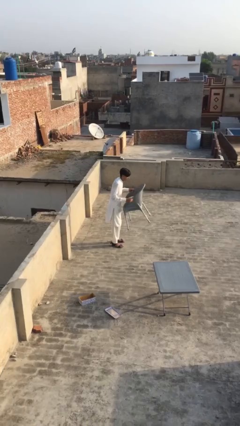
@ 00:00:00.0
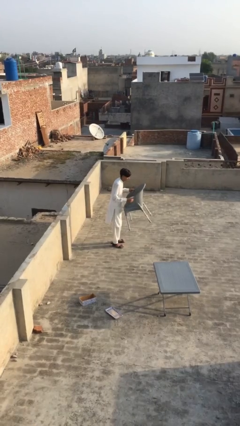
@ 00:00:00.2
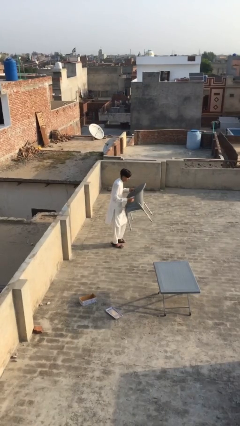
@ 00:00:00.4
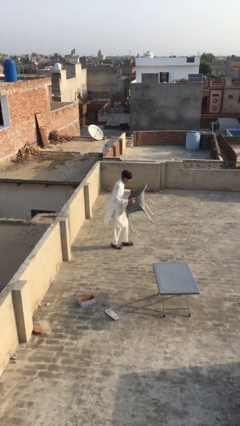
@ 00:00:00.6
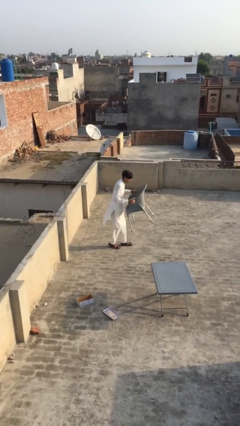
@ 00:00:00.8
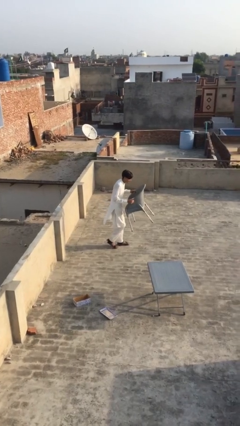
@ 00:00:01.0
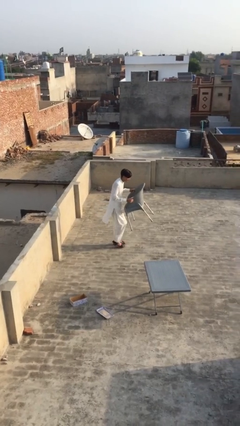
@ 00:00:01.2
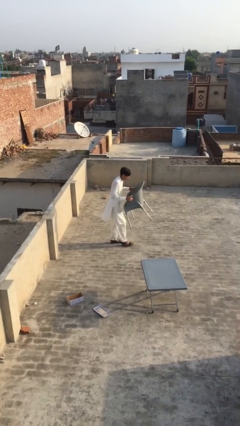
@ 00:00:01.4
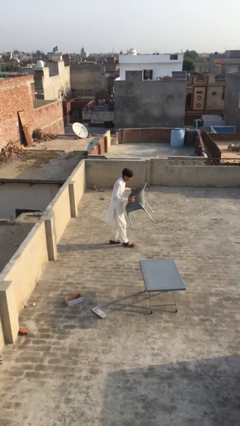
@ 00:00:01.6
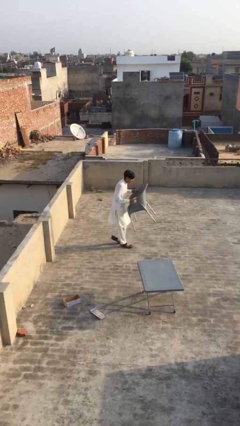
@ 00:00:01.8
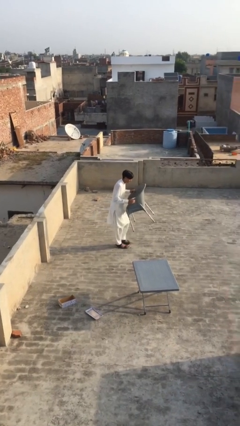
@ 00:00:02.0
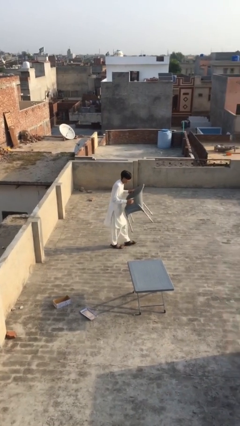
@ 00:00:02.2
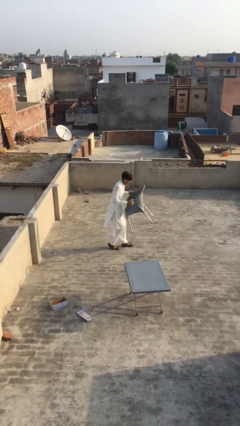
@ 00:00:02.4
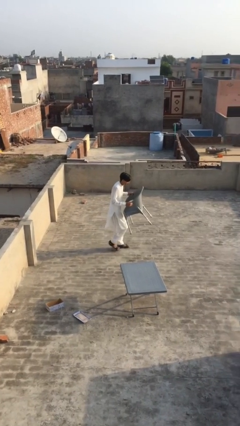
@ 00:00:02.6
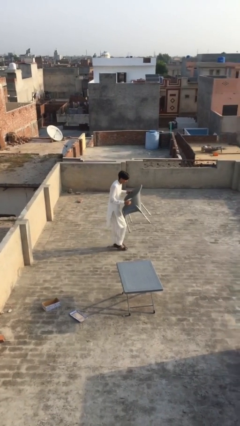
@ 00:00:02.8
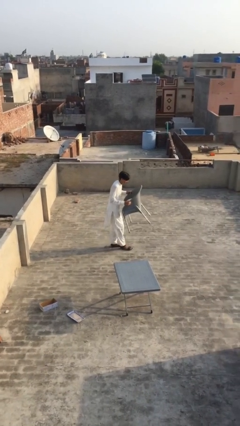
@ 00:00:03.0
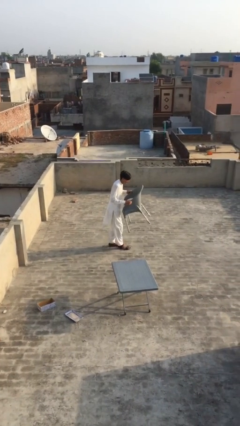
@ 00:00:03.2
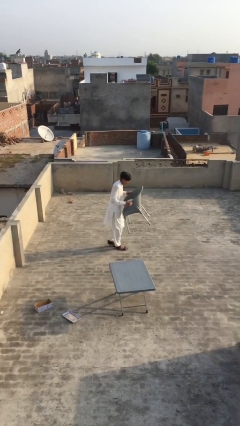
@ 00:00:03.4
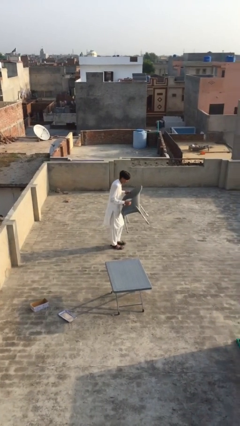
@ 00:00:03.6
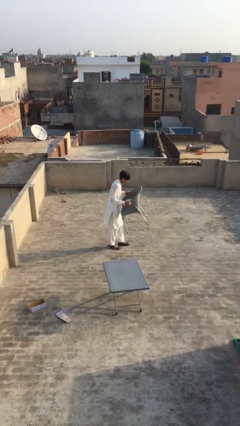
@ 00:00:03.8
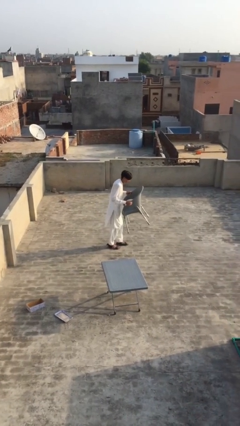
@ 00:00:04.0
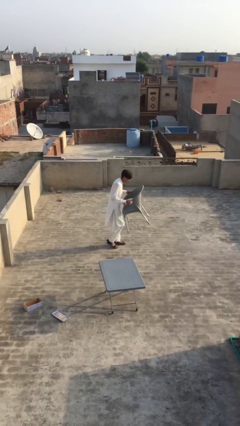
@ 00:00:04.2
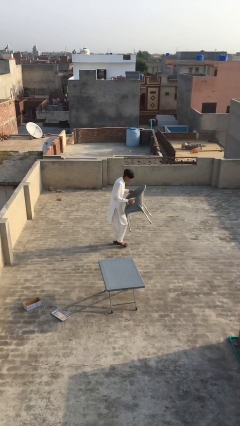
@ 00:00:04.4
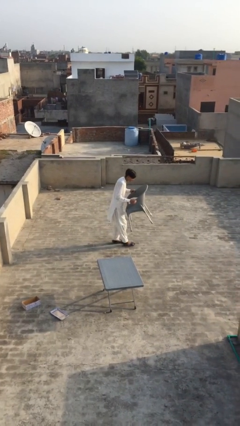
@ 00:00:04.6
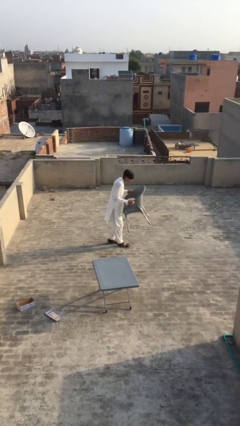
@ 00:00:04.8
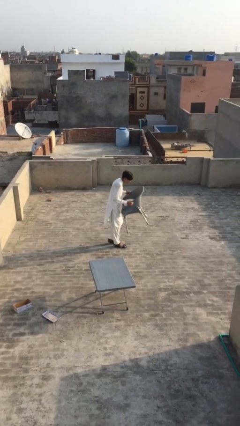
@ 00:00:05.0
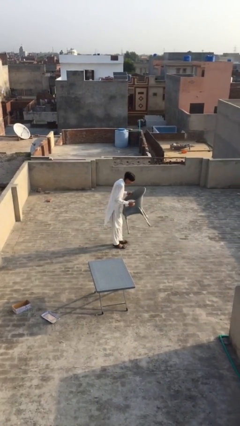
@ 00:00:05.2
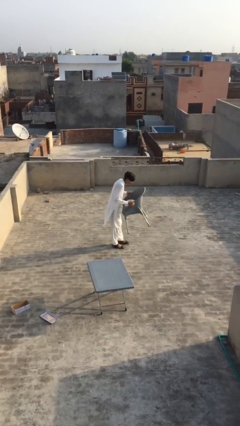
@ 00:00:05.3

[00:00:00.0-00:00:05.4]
person carries heavy object

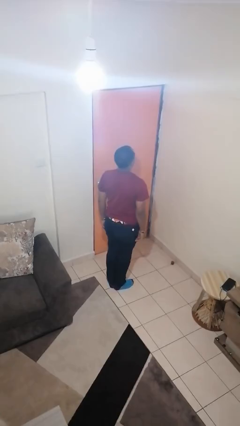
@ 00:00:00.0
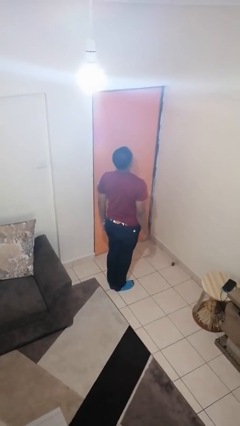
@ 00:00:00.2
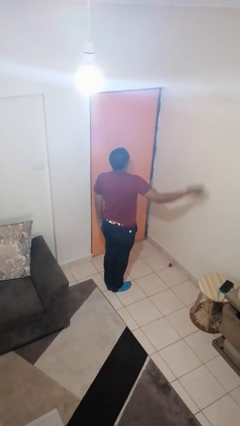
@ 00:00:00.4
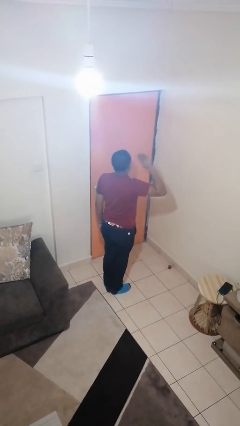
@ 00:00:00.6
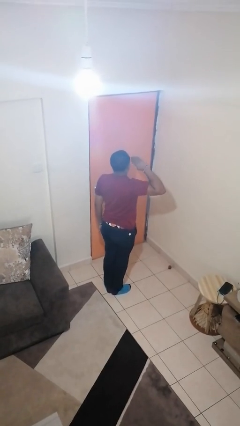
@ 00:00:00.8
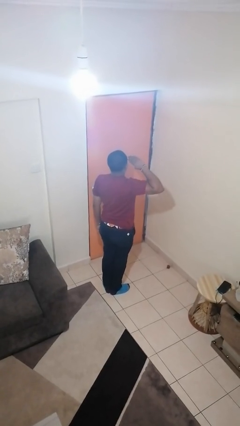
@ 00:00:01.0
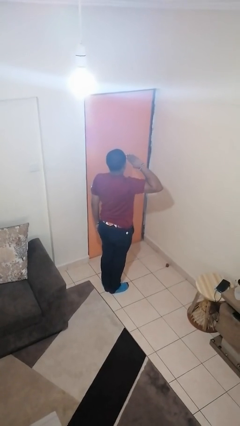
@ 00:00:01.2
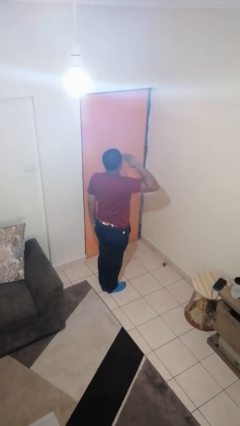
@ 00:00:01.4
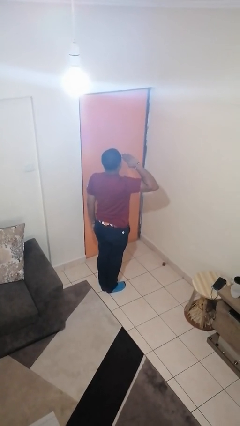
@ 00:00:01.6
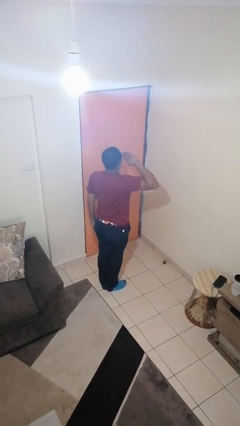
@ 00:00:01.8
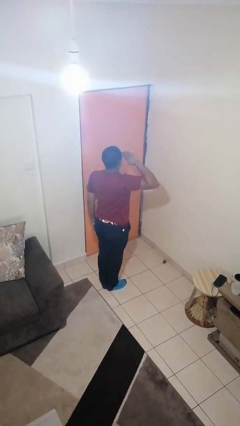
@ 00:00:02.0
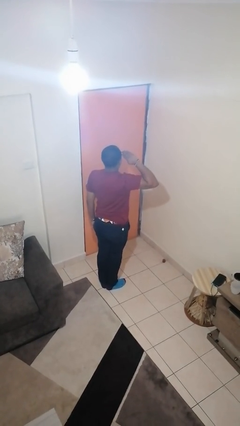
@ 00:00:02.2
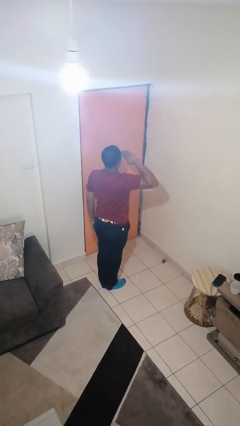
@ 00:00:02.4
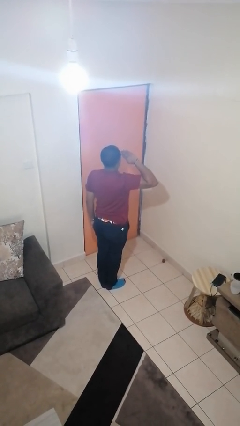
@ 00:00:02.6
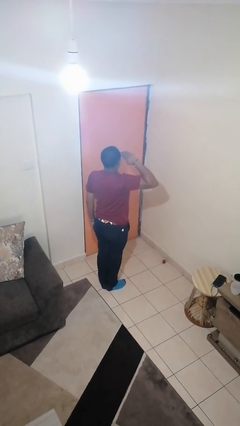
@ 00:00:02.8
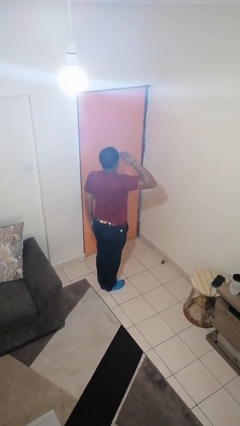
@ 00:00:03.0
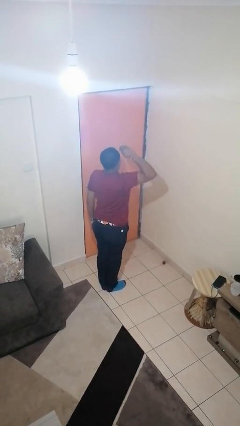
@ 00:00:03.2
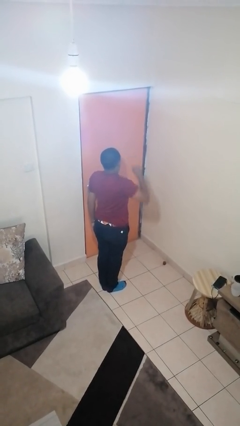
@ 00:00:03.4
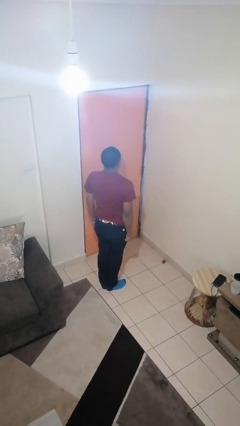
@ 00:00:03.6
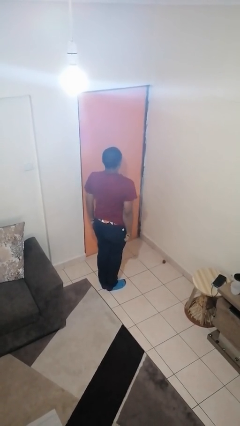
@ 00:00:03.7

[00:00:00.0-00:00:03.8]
person salutes

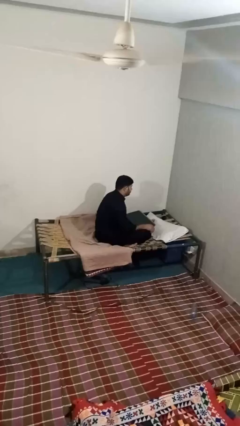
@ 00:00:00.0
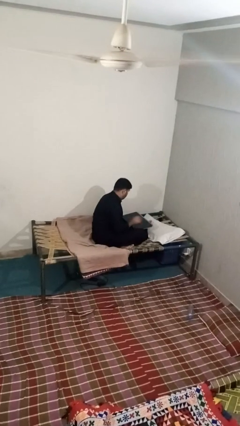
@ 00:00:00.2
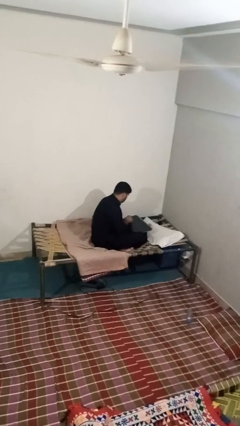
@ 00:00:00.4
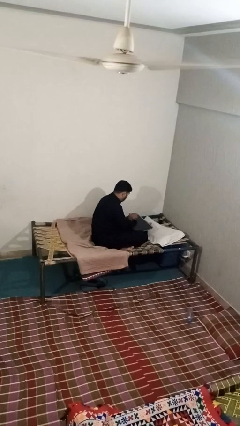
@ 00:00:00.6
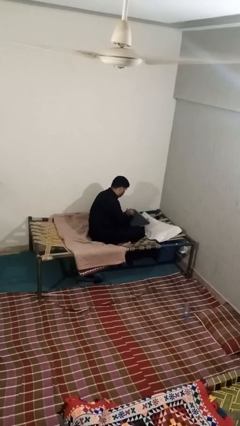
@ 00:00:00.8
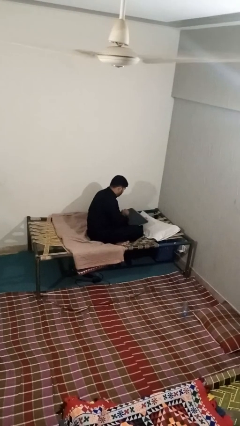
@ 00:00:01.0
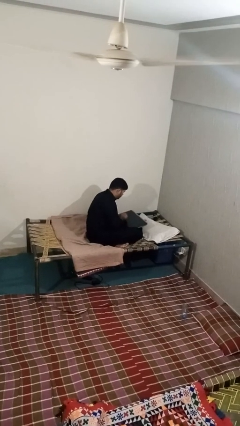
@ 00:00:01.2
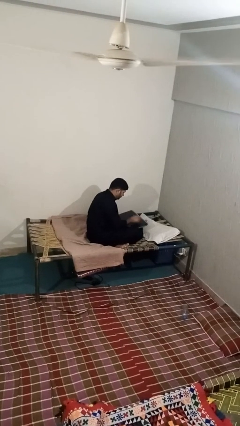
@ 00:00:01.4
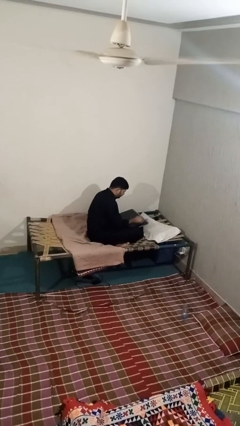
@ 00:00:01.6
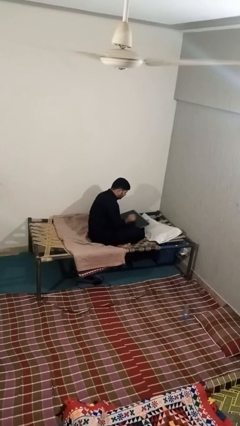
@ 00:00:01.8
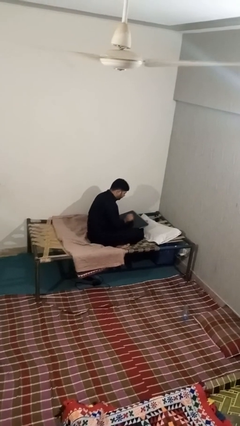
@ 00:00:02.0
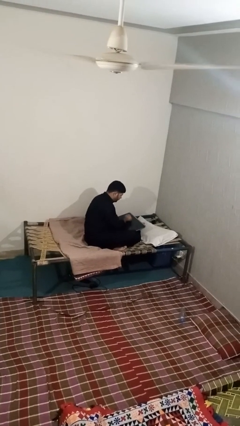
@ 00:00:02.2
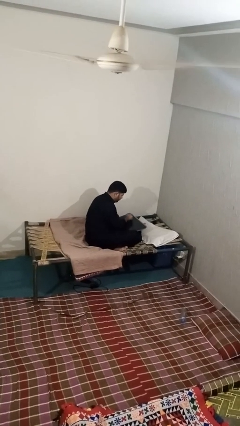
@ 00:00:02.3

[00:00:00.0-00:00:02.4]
person interacts with tablet

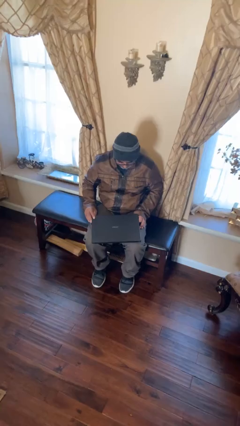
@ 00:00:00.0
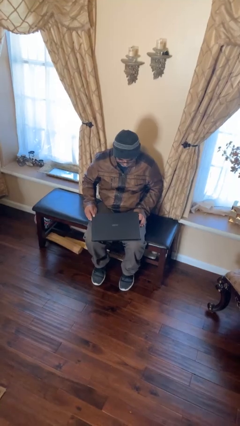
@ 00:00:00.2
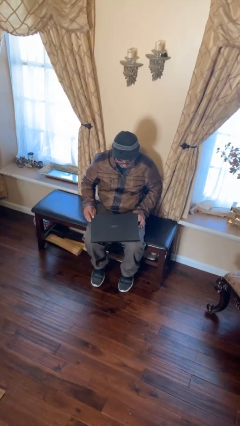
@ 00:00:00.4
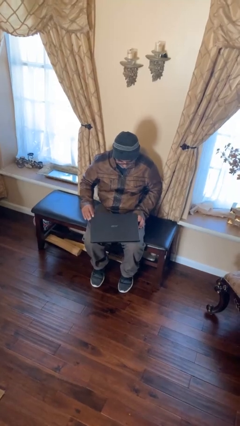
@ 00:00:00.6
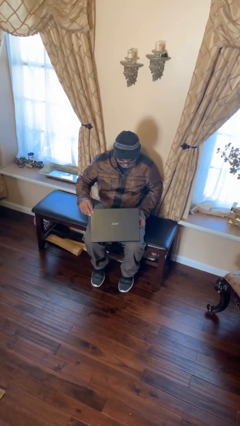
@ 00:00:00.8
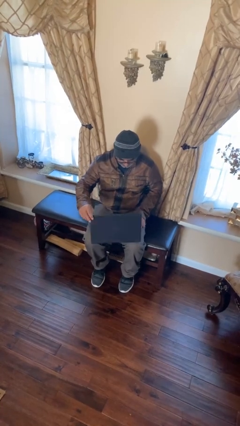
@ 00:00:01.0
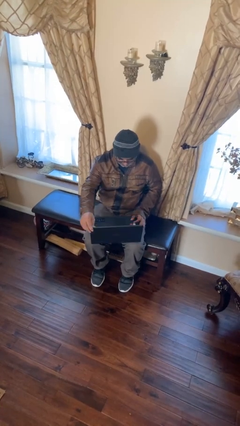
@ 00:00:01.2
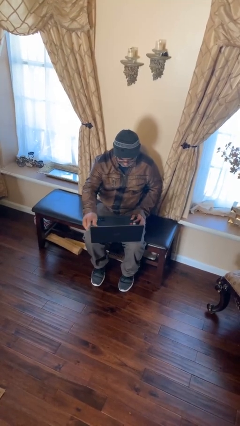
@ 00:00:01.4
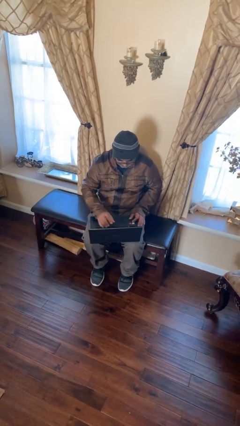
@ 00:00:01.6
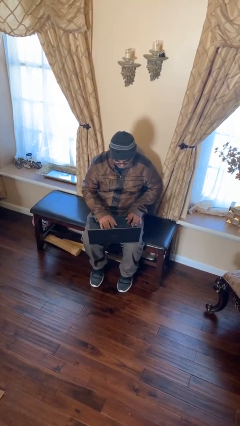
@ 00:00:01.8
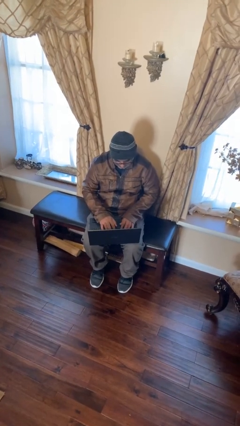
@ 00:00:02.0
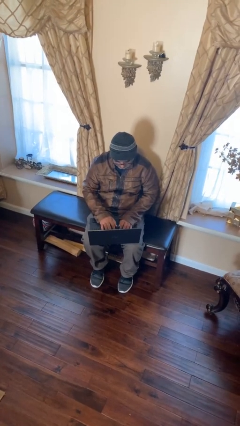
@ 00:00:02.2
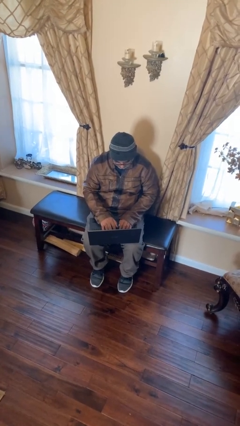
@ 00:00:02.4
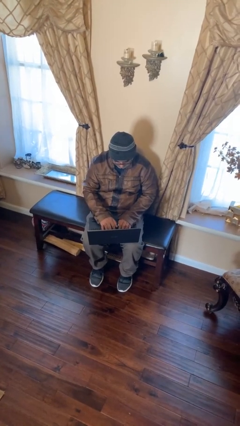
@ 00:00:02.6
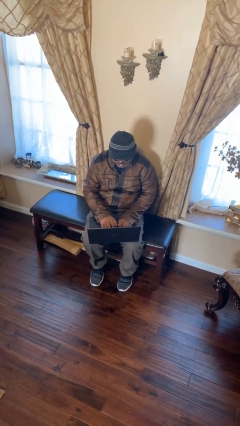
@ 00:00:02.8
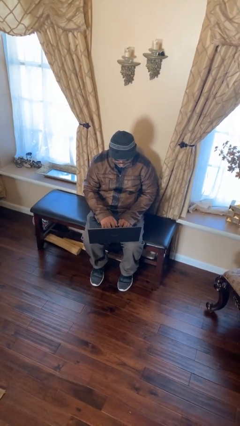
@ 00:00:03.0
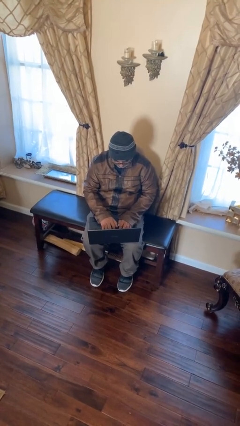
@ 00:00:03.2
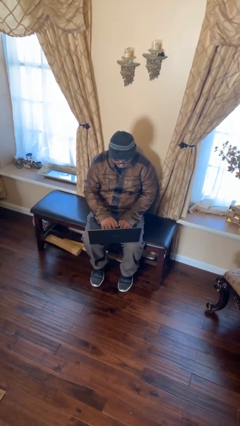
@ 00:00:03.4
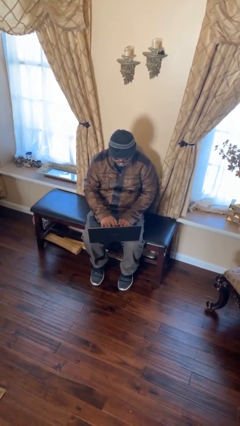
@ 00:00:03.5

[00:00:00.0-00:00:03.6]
person interacts with laptop

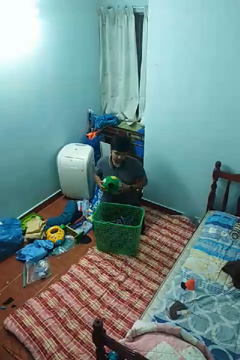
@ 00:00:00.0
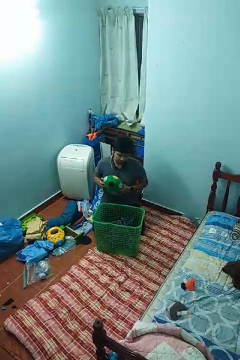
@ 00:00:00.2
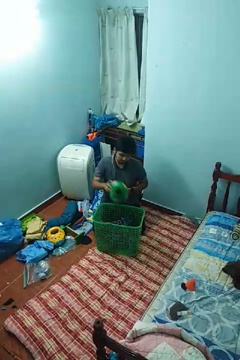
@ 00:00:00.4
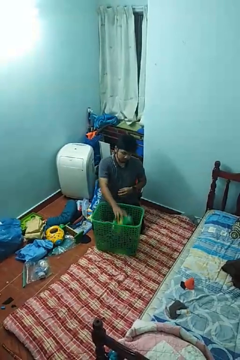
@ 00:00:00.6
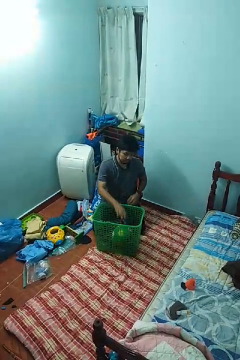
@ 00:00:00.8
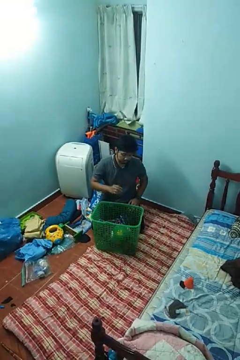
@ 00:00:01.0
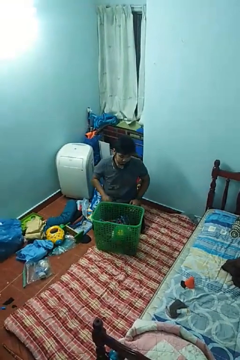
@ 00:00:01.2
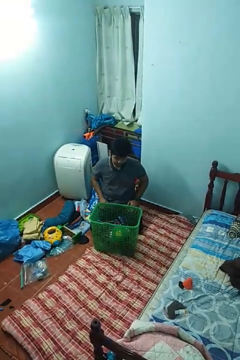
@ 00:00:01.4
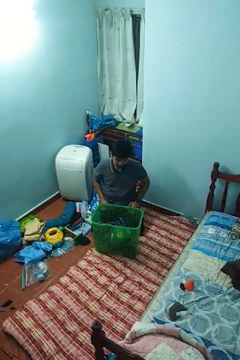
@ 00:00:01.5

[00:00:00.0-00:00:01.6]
person puts object into basket

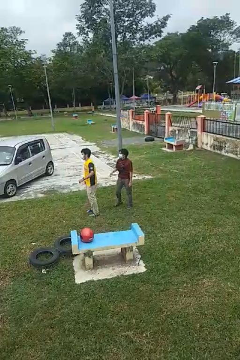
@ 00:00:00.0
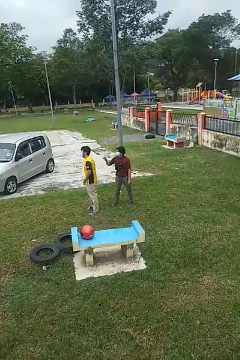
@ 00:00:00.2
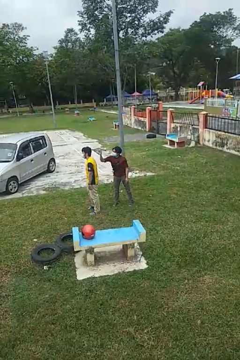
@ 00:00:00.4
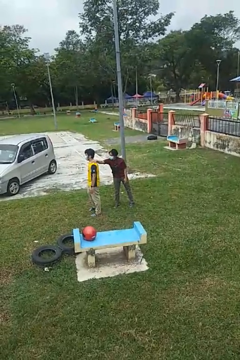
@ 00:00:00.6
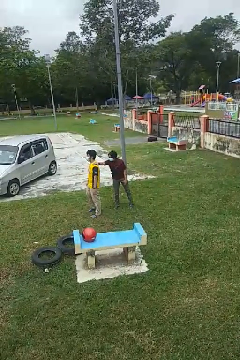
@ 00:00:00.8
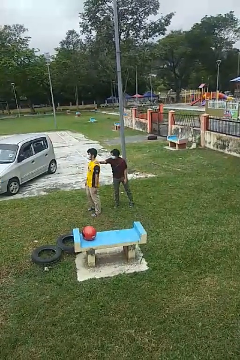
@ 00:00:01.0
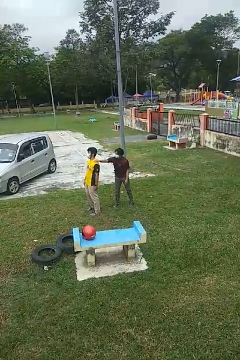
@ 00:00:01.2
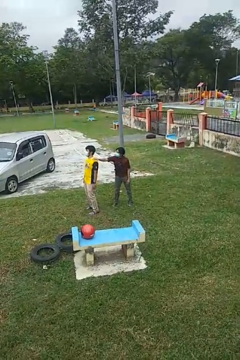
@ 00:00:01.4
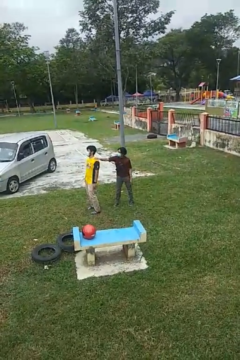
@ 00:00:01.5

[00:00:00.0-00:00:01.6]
person grabs person by shoulder
